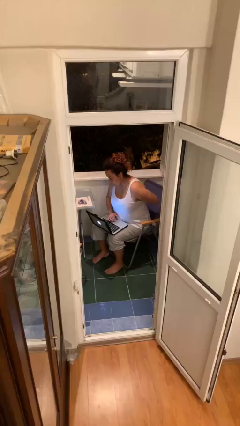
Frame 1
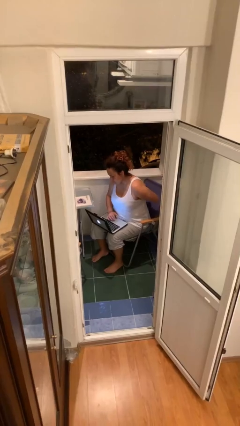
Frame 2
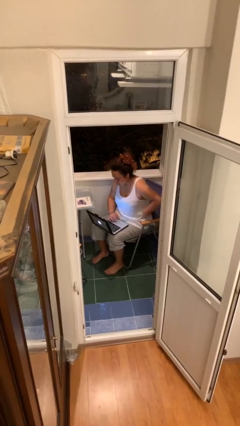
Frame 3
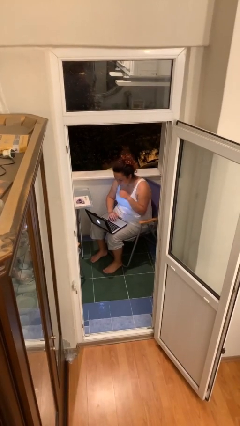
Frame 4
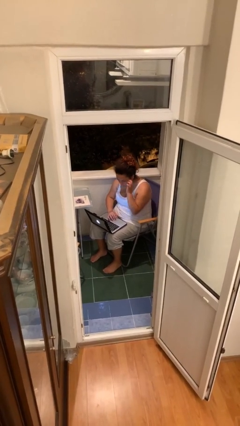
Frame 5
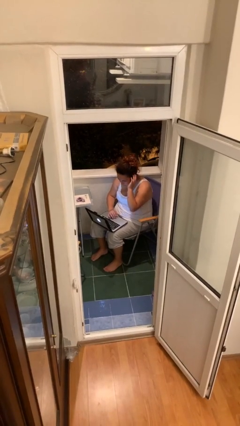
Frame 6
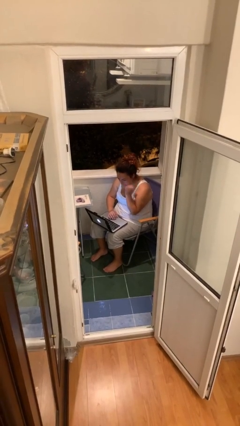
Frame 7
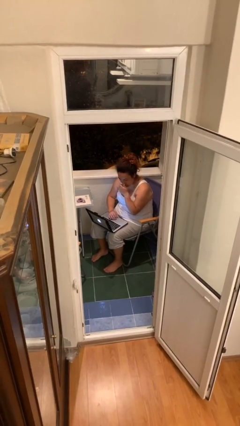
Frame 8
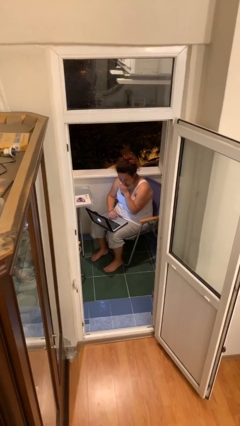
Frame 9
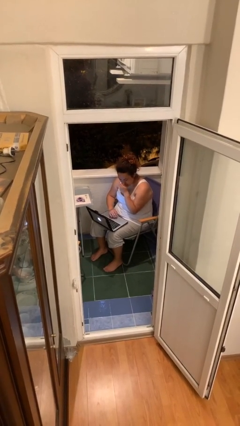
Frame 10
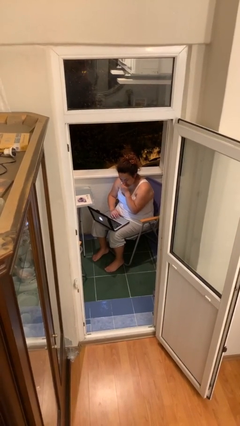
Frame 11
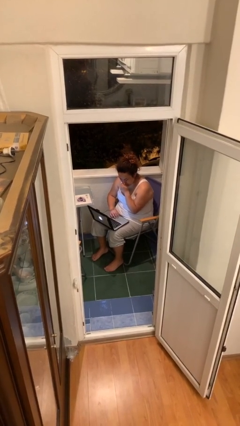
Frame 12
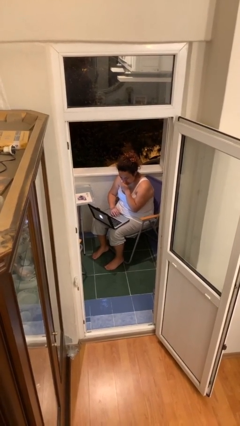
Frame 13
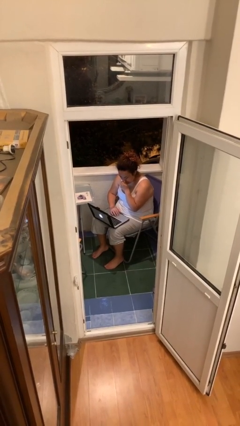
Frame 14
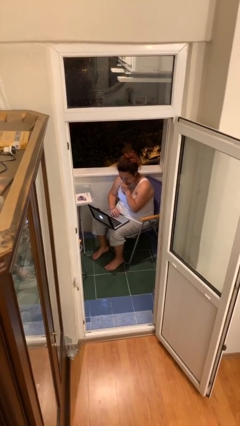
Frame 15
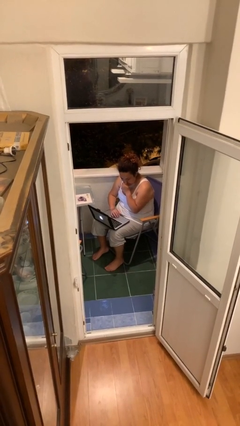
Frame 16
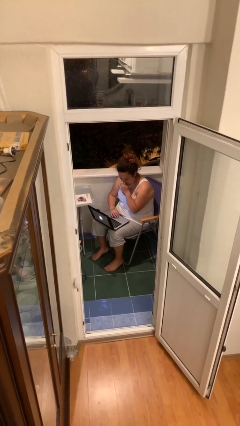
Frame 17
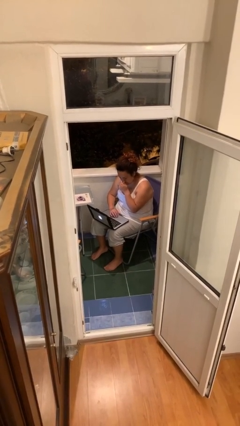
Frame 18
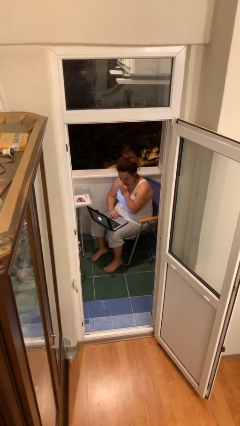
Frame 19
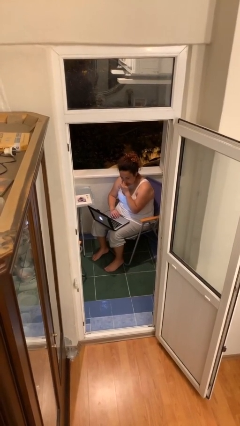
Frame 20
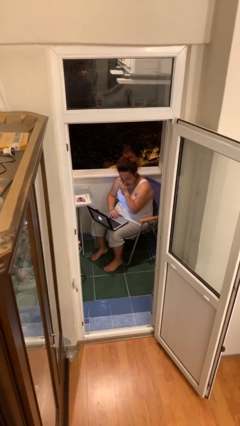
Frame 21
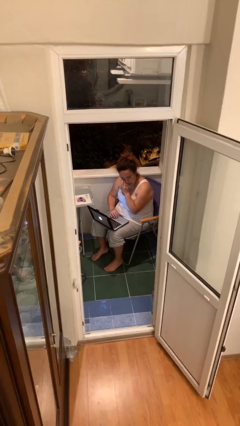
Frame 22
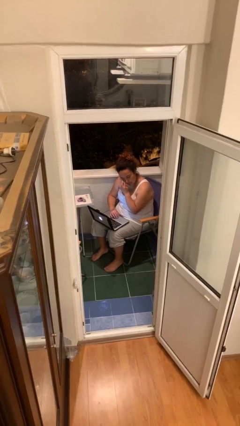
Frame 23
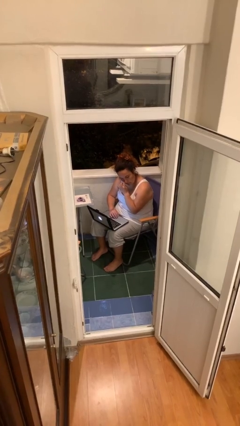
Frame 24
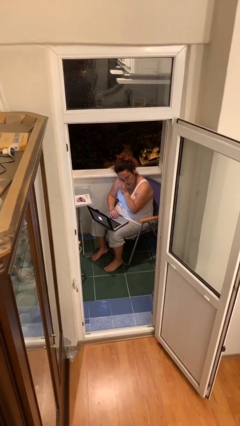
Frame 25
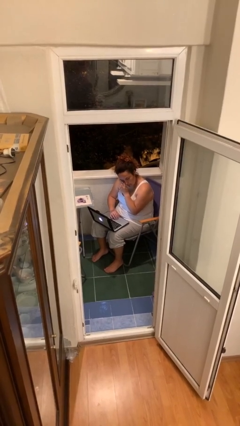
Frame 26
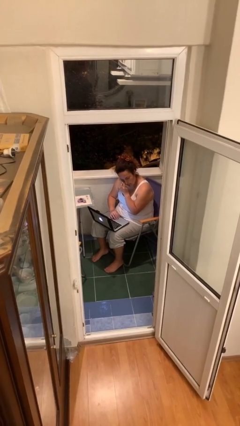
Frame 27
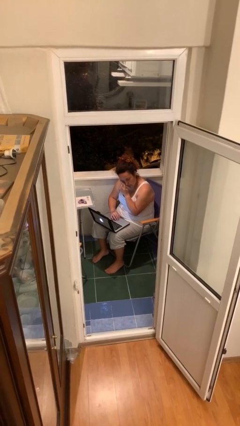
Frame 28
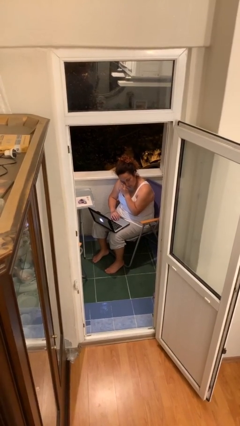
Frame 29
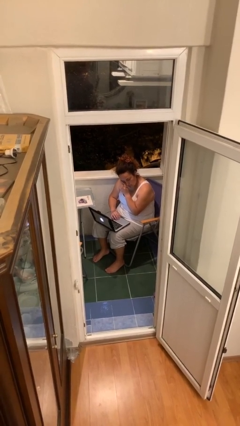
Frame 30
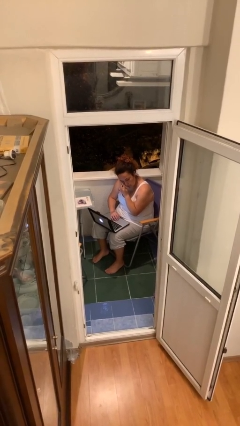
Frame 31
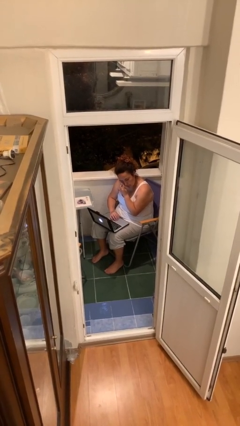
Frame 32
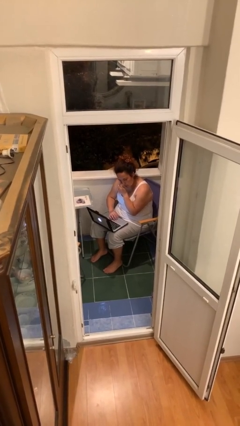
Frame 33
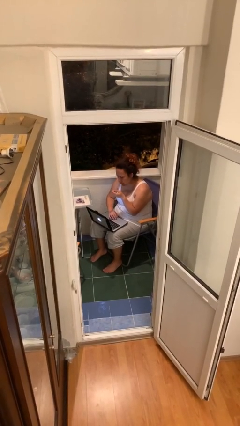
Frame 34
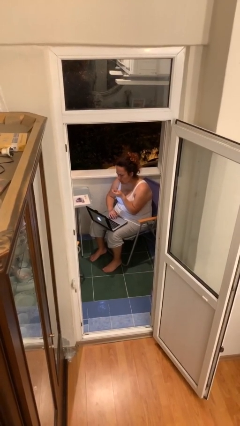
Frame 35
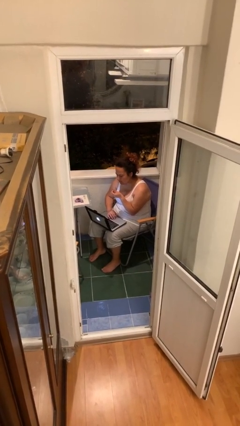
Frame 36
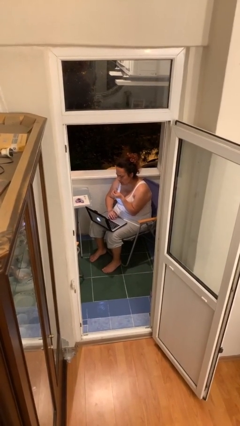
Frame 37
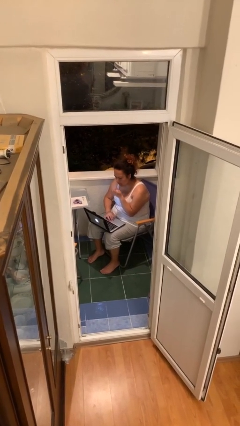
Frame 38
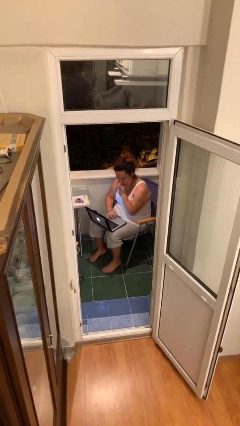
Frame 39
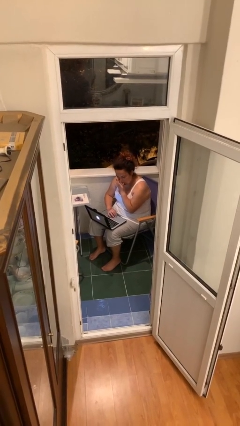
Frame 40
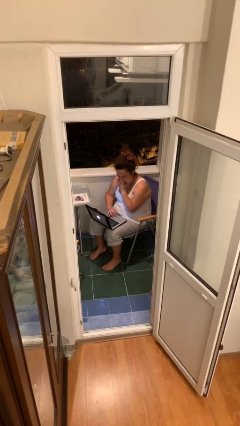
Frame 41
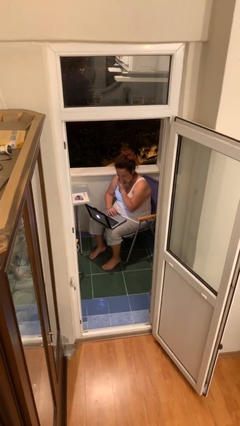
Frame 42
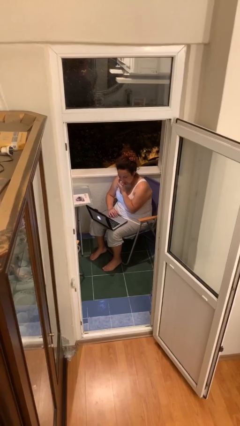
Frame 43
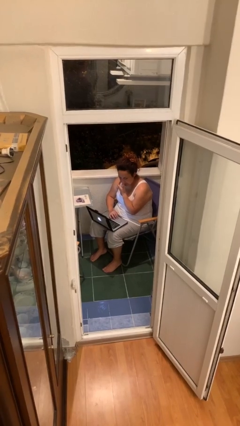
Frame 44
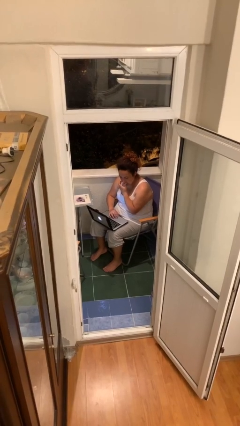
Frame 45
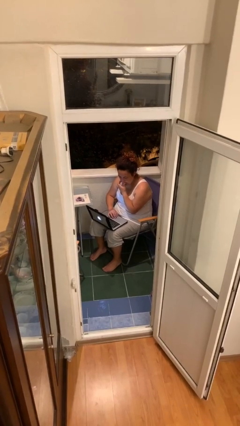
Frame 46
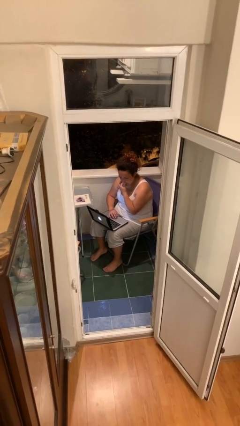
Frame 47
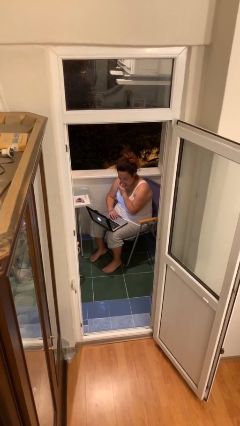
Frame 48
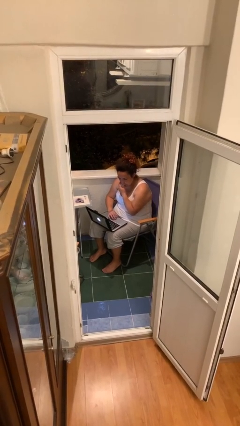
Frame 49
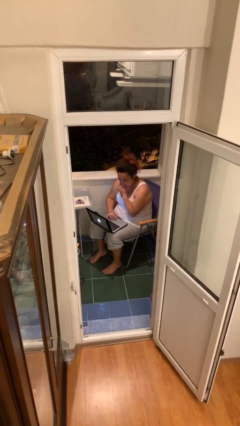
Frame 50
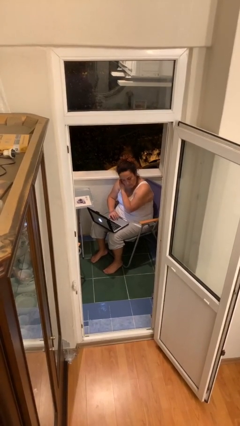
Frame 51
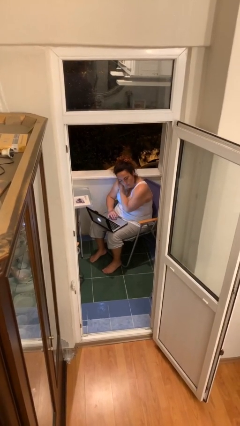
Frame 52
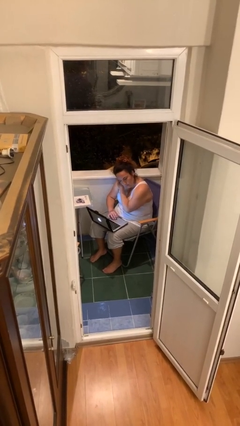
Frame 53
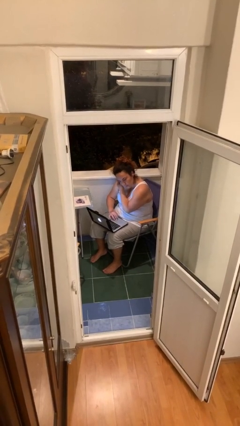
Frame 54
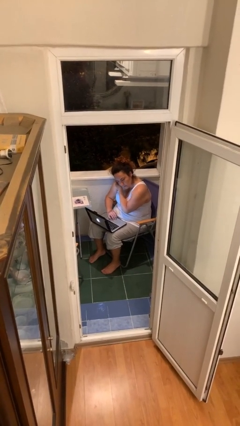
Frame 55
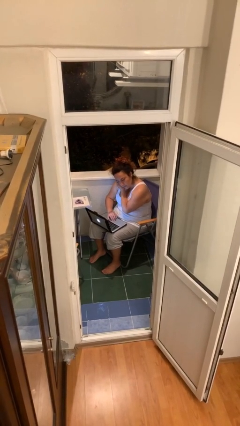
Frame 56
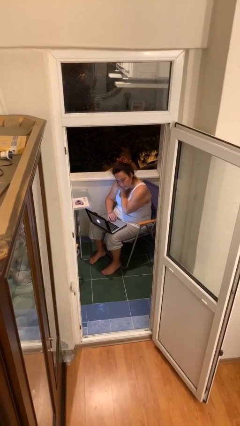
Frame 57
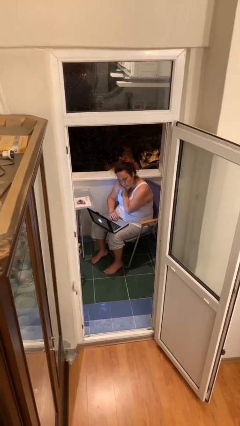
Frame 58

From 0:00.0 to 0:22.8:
person interacts with laptop

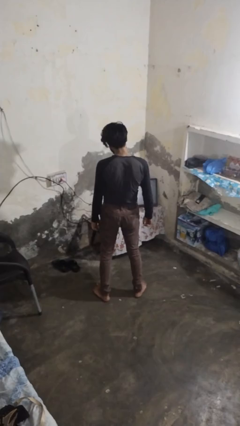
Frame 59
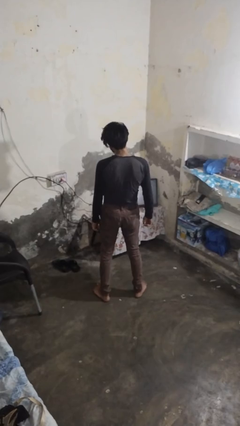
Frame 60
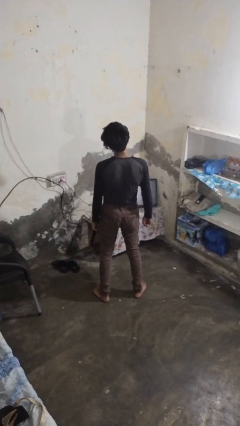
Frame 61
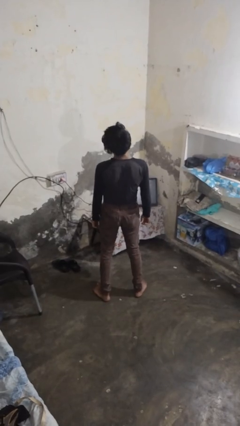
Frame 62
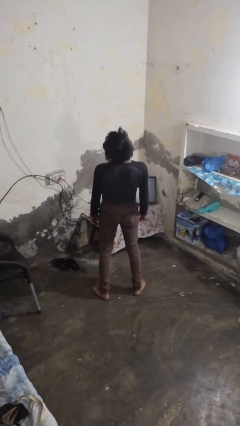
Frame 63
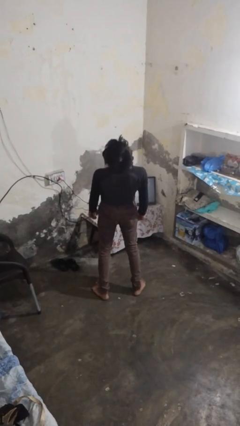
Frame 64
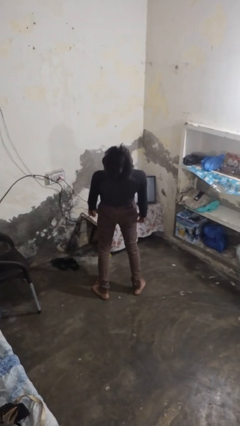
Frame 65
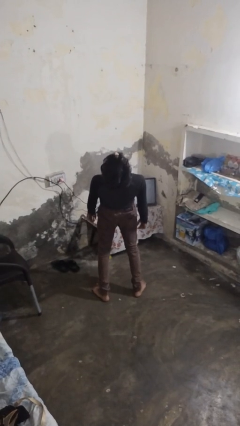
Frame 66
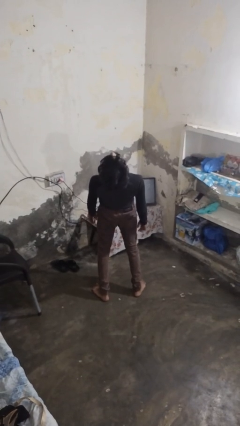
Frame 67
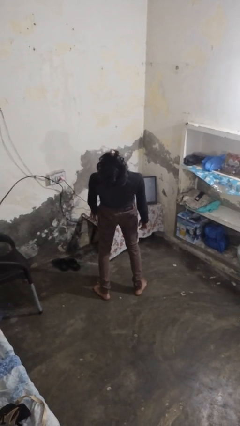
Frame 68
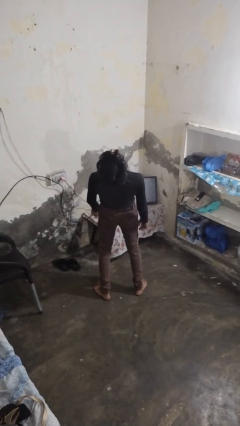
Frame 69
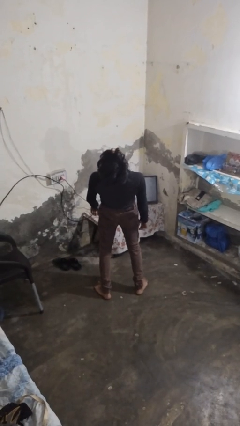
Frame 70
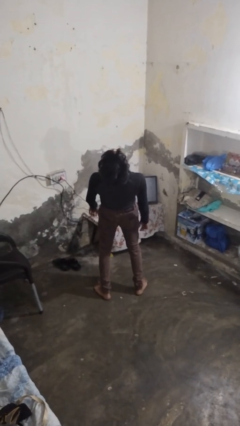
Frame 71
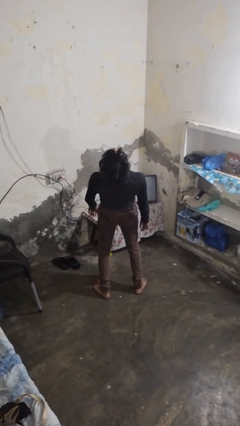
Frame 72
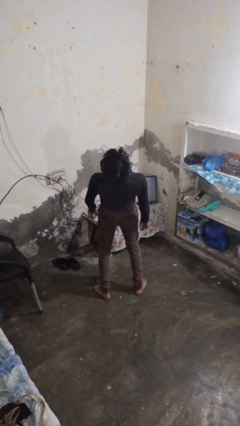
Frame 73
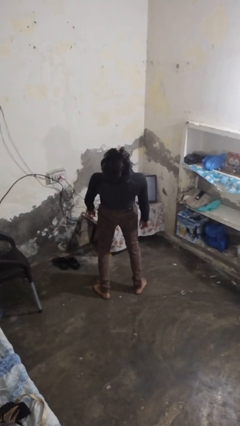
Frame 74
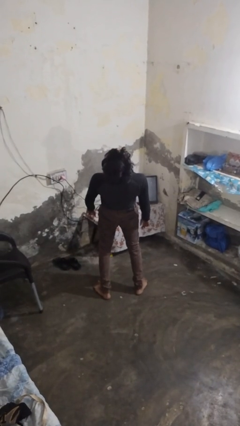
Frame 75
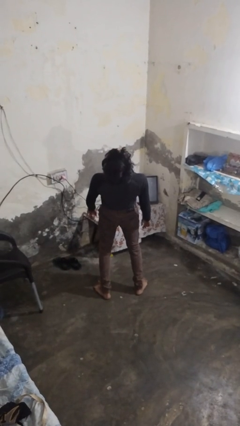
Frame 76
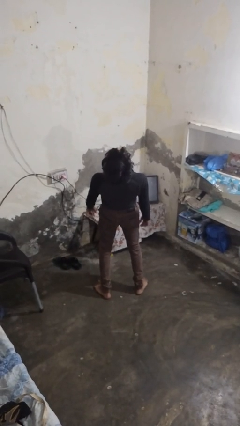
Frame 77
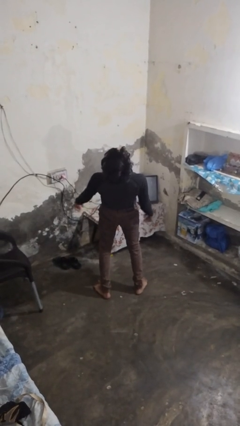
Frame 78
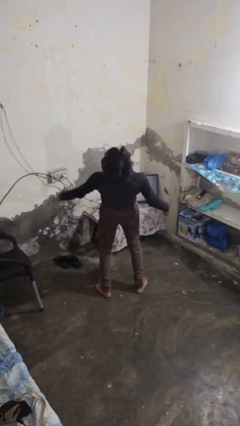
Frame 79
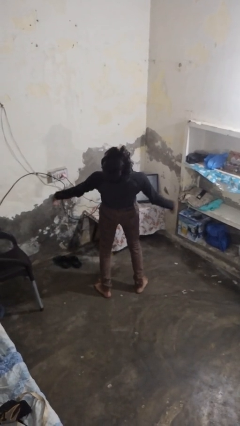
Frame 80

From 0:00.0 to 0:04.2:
person stretches back

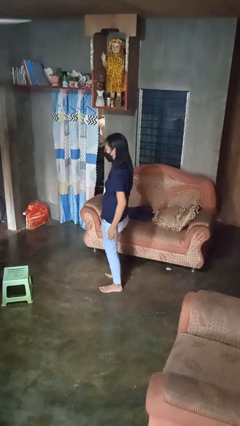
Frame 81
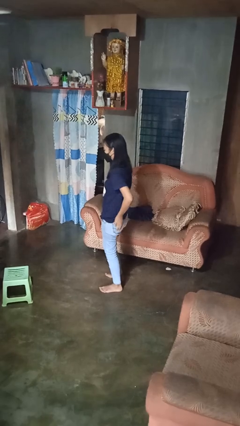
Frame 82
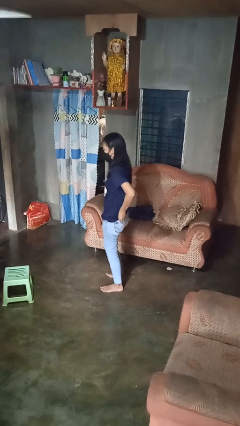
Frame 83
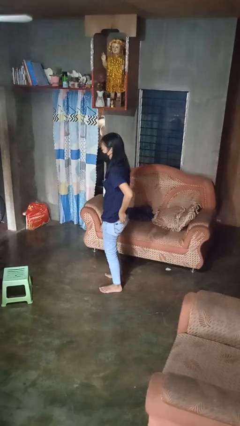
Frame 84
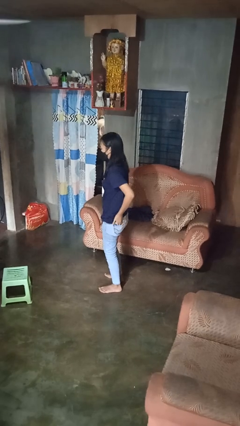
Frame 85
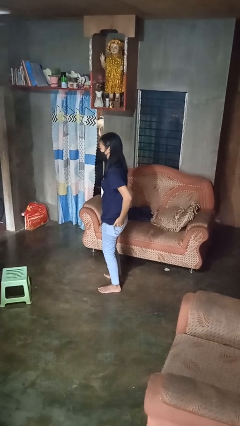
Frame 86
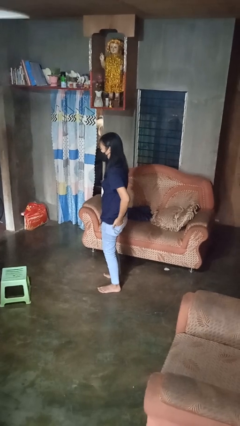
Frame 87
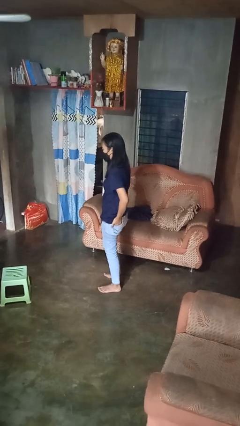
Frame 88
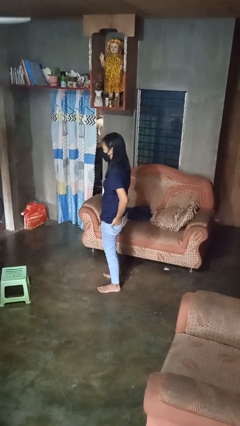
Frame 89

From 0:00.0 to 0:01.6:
person puts hands in back pockets

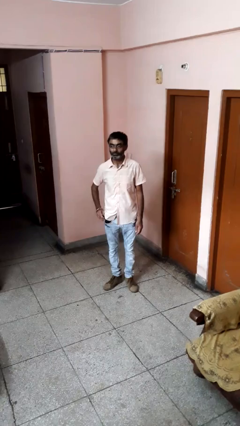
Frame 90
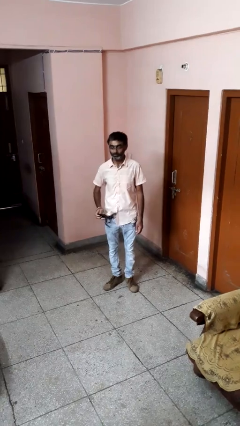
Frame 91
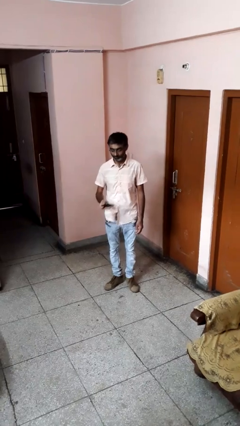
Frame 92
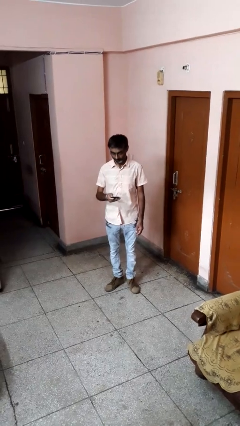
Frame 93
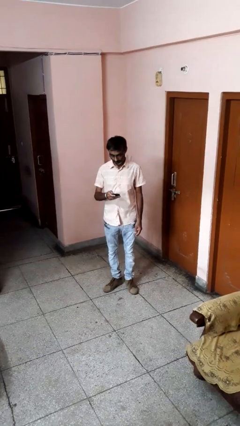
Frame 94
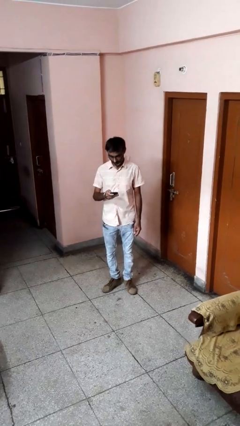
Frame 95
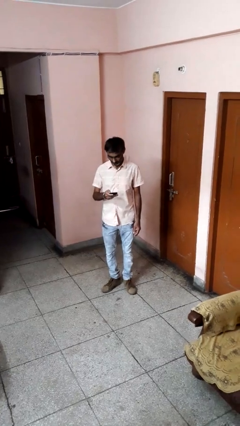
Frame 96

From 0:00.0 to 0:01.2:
person takes phone from pocket
